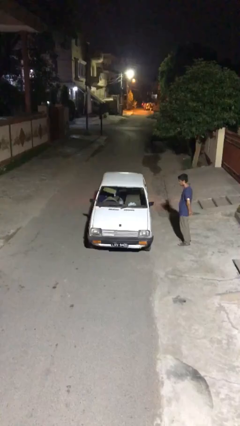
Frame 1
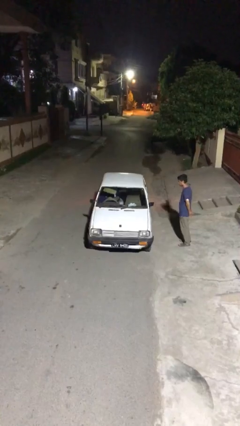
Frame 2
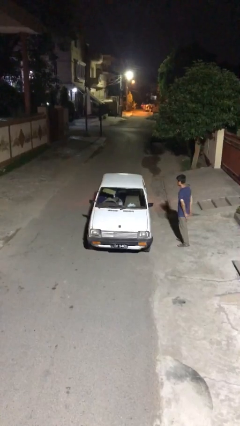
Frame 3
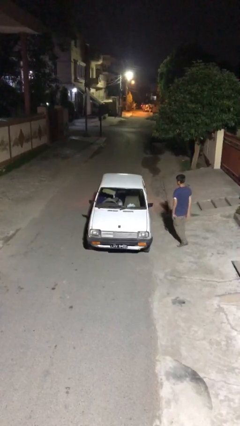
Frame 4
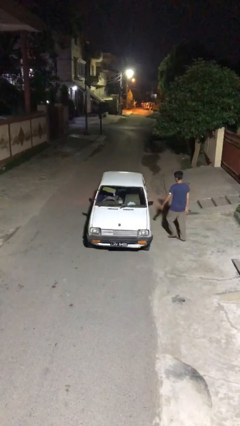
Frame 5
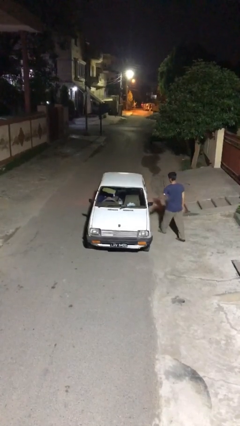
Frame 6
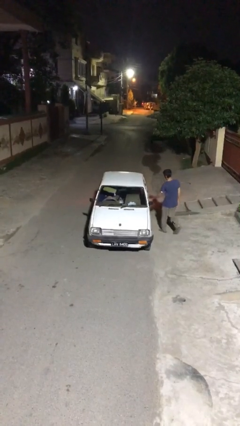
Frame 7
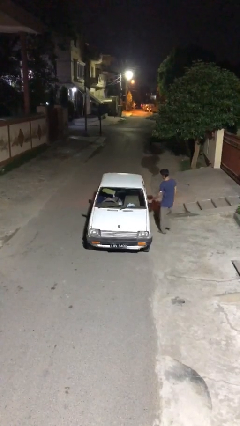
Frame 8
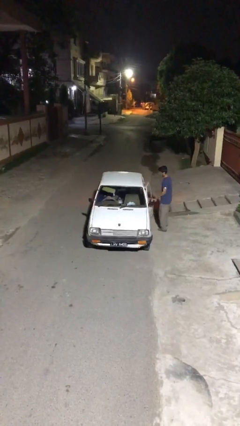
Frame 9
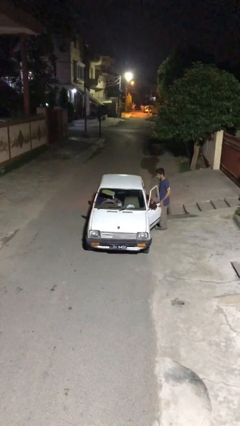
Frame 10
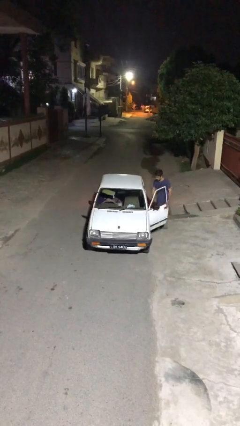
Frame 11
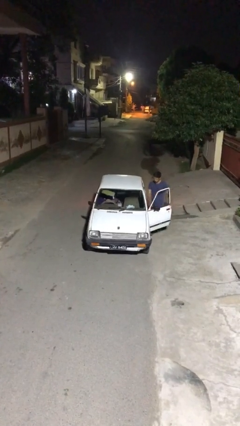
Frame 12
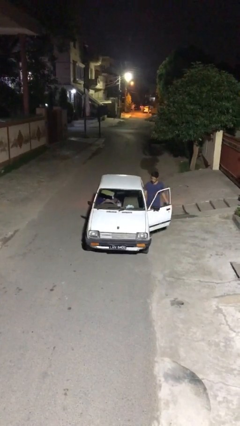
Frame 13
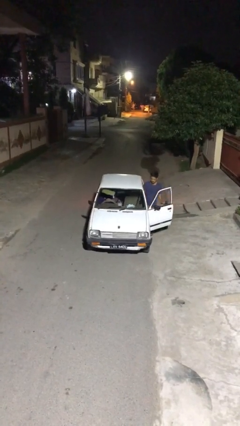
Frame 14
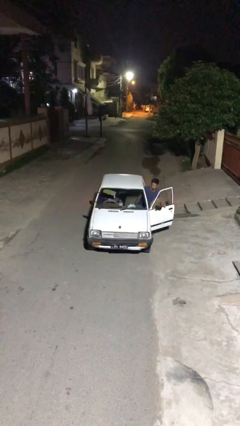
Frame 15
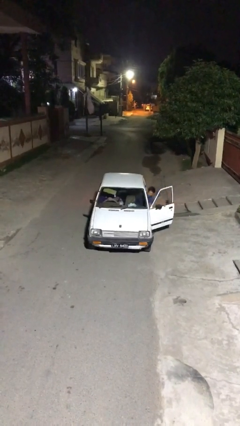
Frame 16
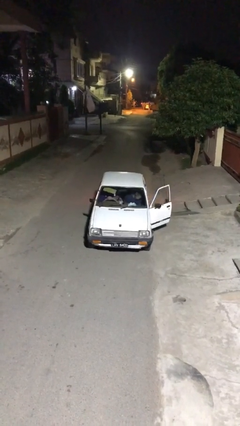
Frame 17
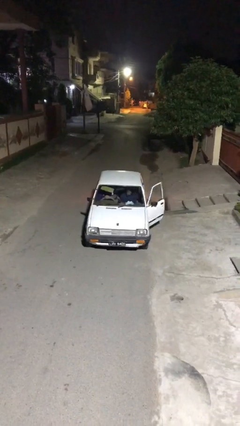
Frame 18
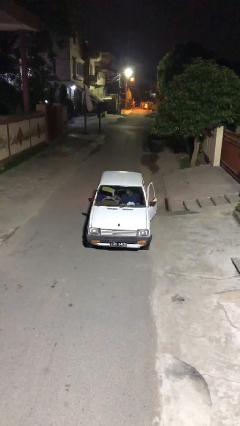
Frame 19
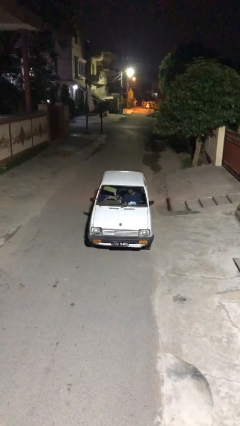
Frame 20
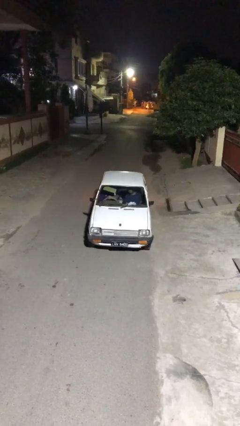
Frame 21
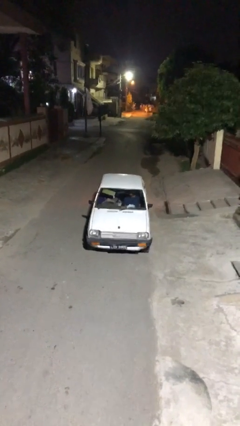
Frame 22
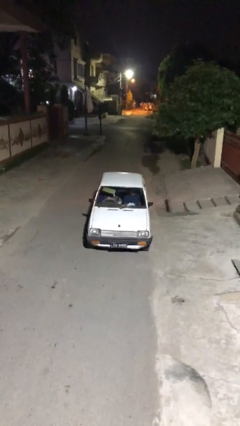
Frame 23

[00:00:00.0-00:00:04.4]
car picks up person

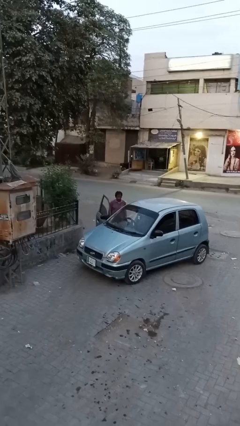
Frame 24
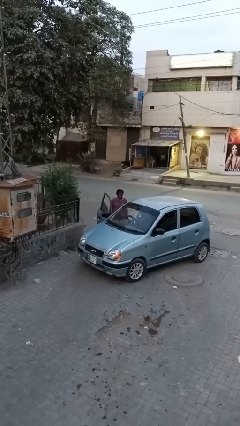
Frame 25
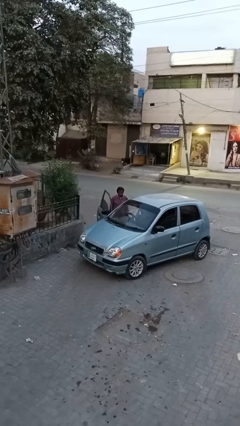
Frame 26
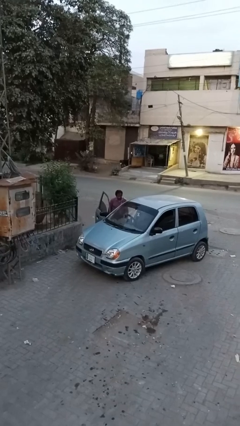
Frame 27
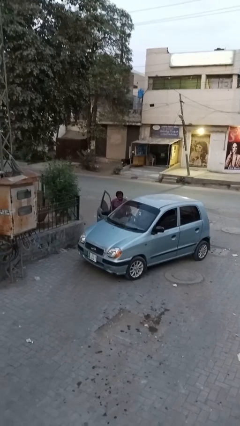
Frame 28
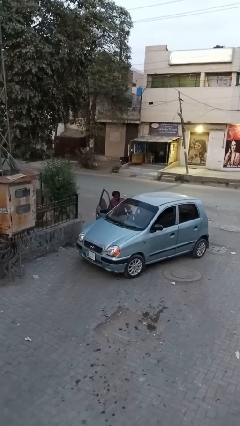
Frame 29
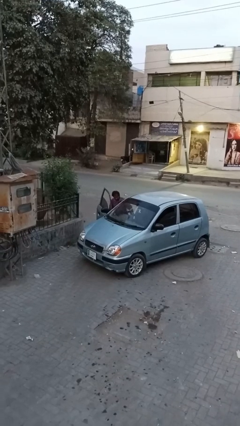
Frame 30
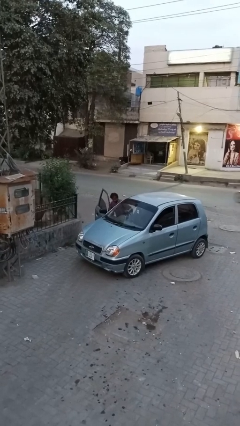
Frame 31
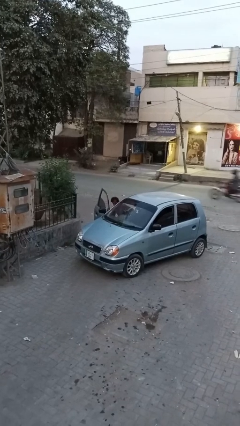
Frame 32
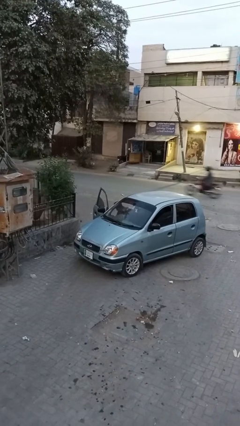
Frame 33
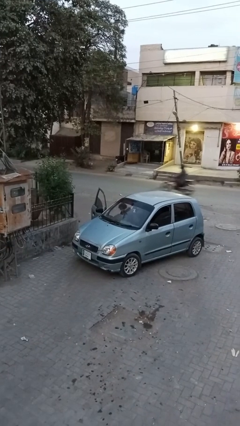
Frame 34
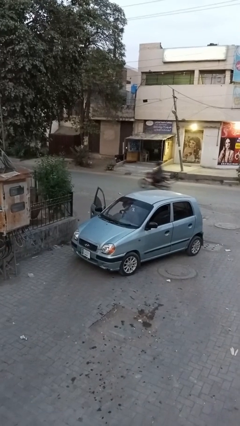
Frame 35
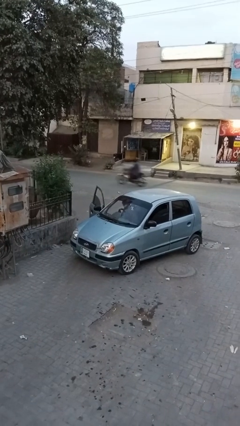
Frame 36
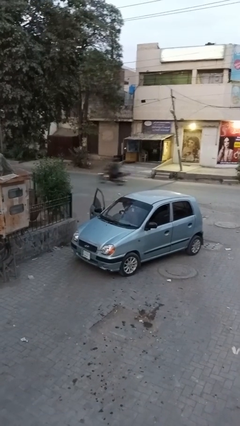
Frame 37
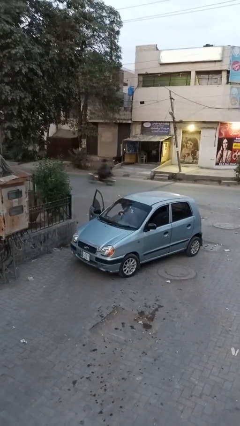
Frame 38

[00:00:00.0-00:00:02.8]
person enters car

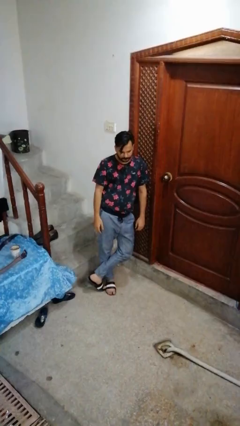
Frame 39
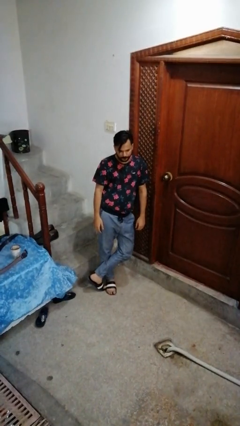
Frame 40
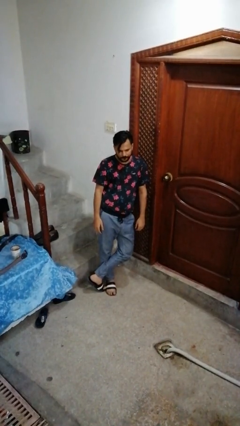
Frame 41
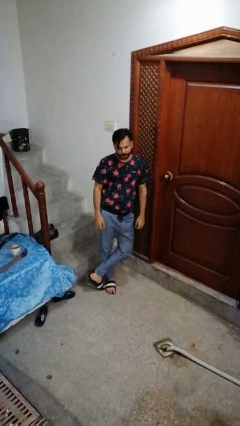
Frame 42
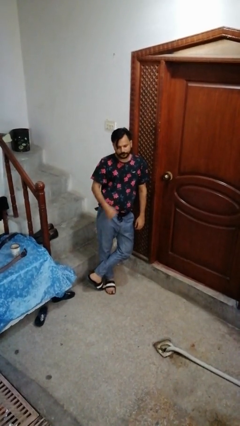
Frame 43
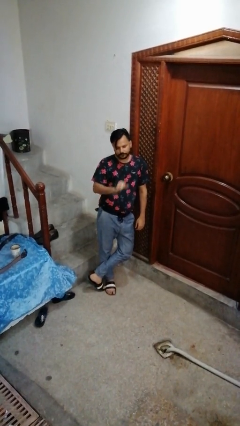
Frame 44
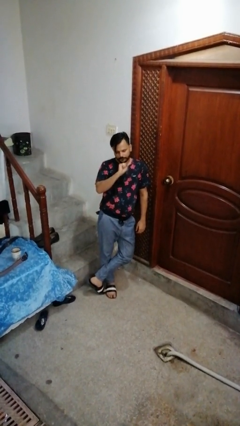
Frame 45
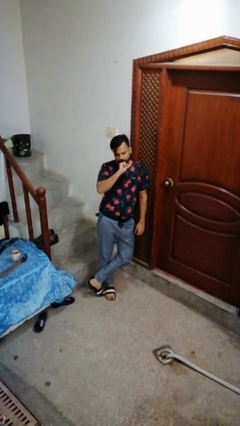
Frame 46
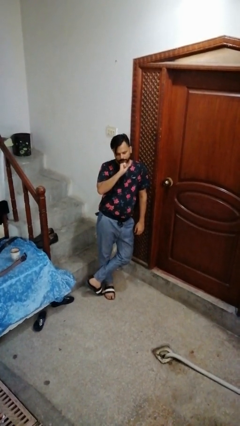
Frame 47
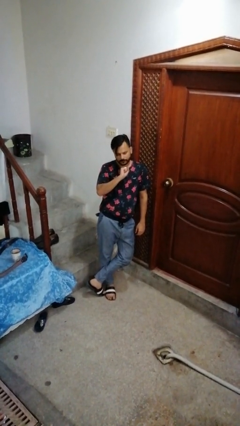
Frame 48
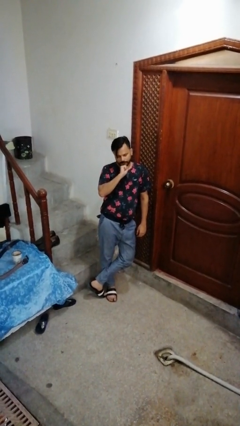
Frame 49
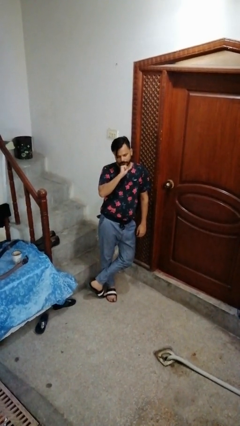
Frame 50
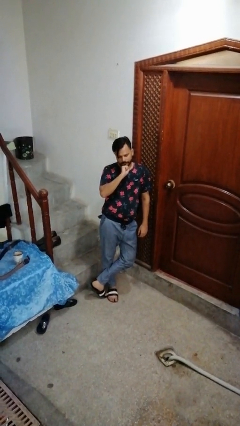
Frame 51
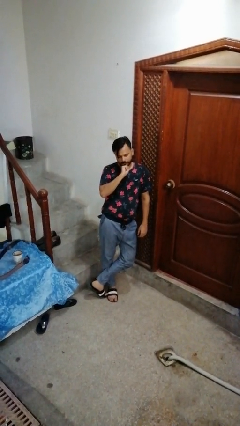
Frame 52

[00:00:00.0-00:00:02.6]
person strokes chin

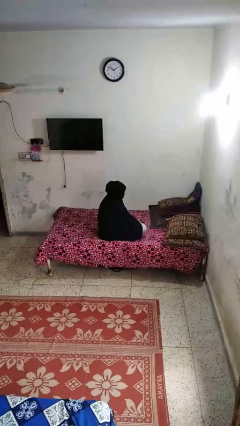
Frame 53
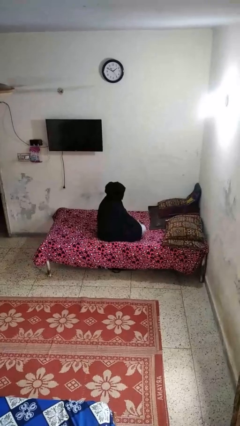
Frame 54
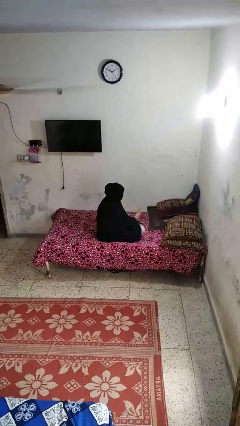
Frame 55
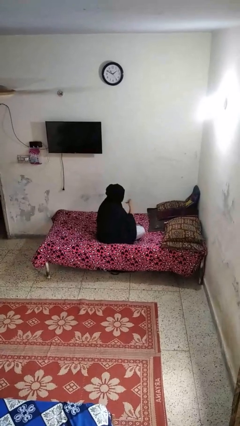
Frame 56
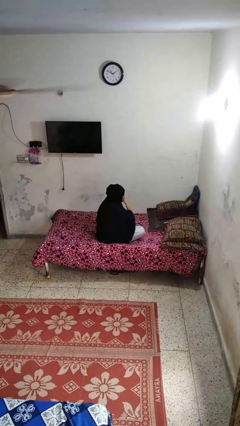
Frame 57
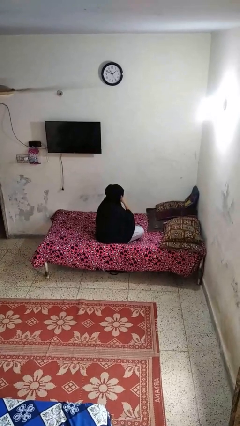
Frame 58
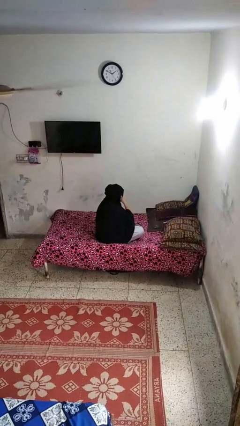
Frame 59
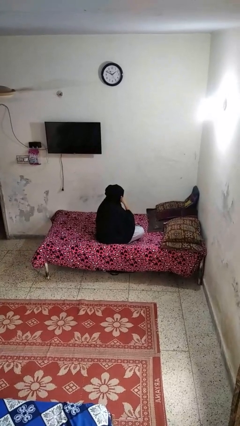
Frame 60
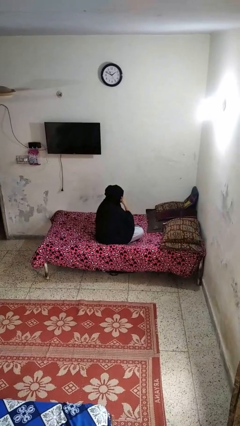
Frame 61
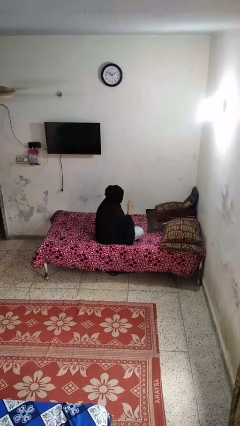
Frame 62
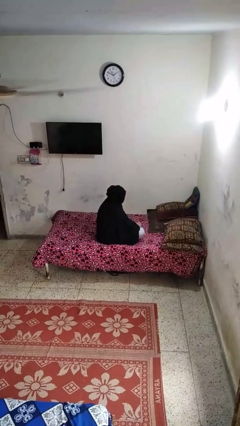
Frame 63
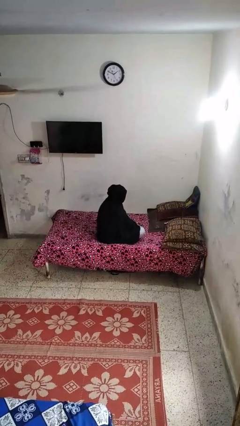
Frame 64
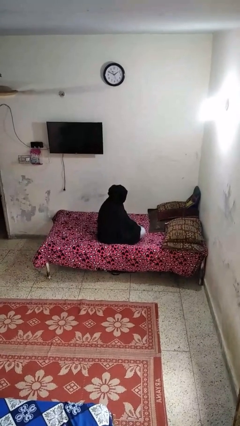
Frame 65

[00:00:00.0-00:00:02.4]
person gestures call me

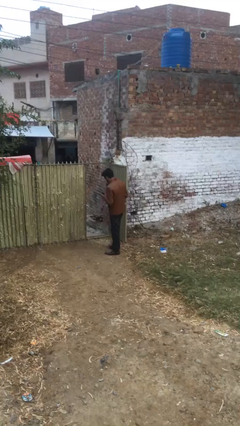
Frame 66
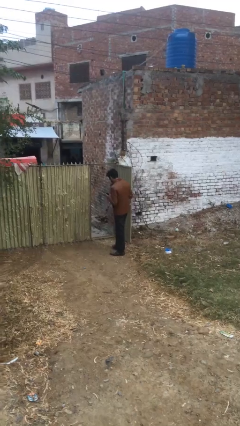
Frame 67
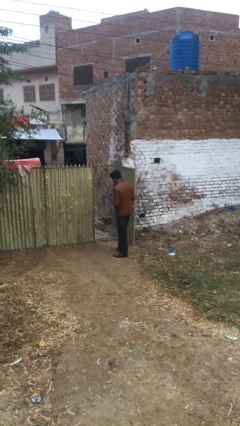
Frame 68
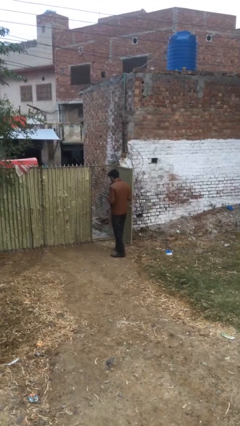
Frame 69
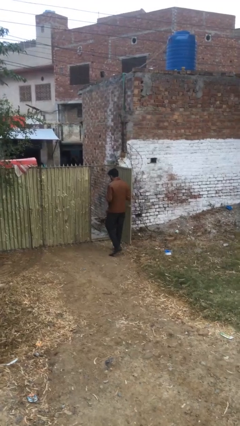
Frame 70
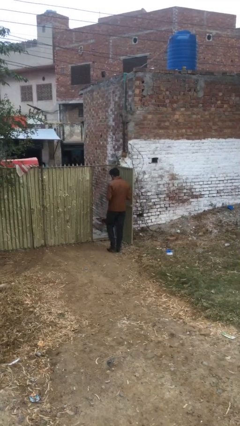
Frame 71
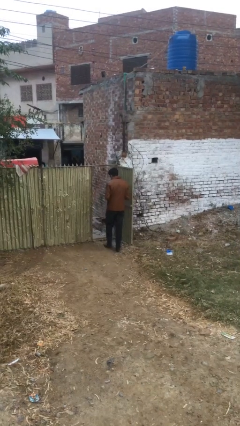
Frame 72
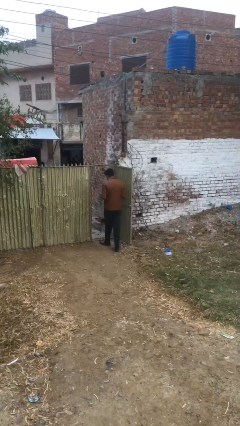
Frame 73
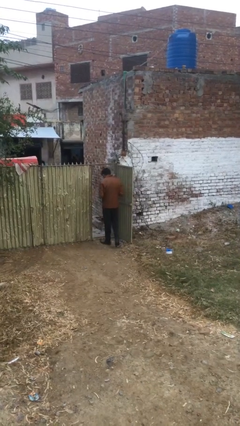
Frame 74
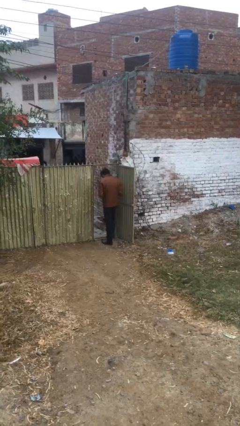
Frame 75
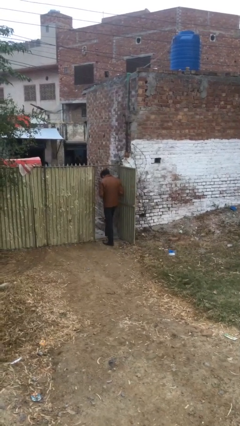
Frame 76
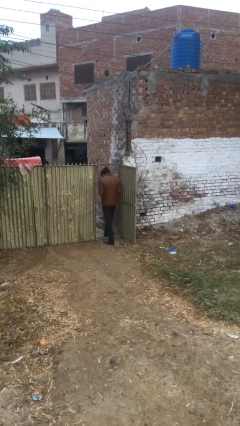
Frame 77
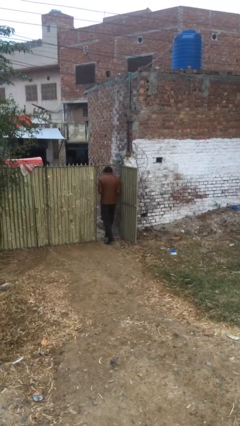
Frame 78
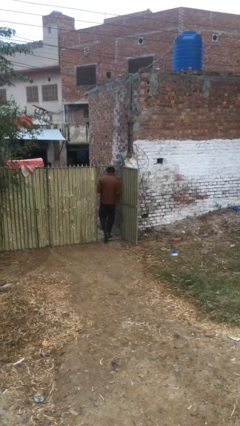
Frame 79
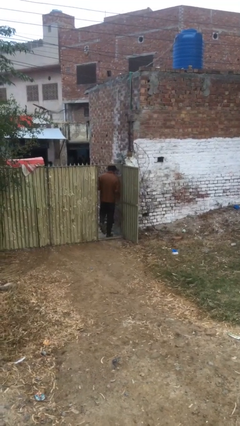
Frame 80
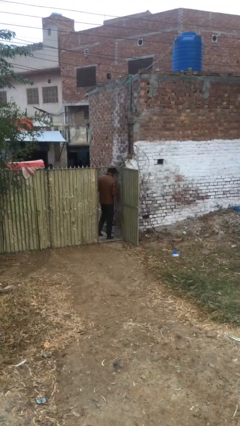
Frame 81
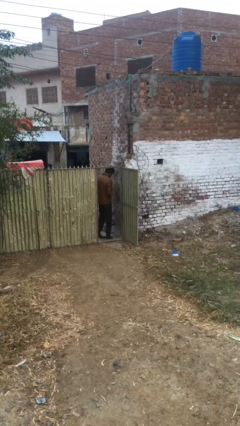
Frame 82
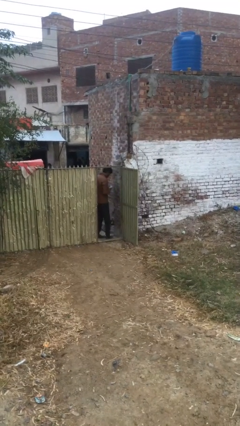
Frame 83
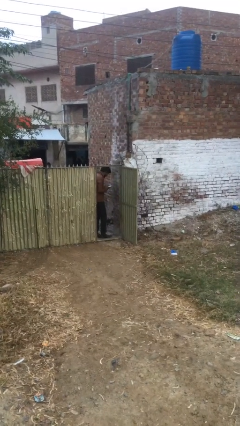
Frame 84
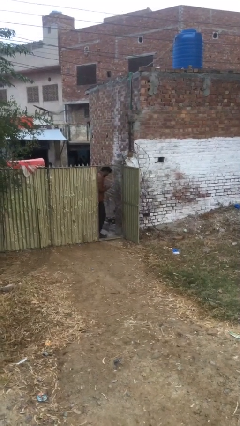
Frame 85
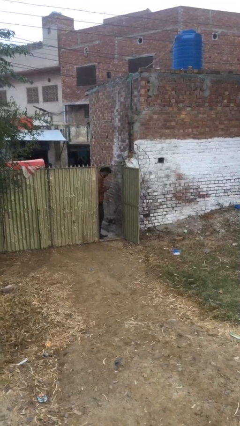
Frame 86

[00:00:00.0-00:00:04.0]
person enters scene through structure

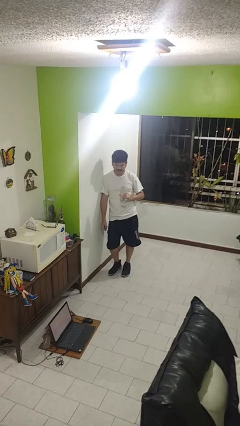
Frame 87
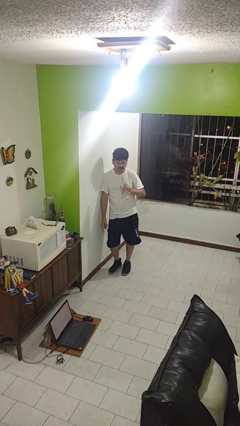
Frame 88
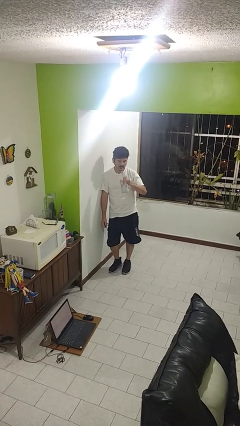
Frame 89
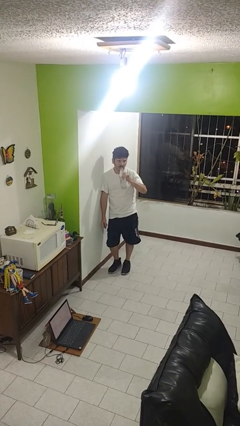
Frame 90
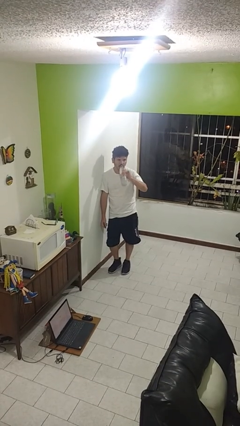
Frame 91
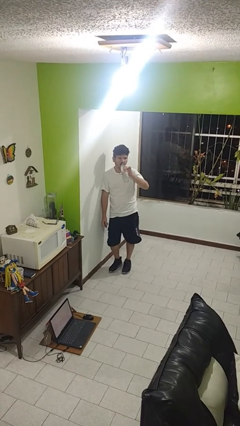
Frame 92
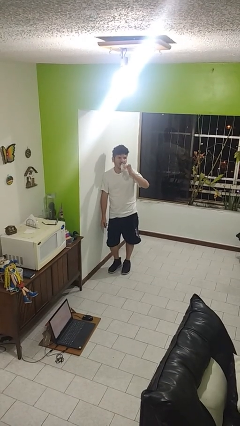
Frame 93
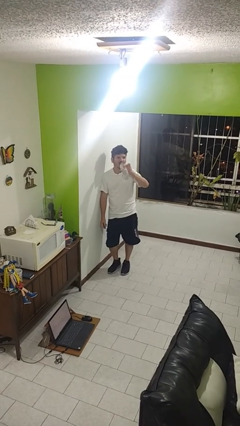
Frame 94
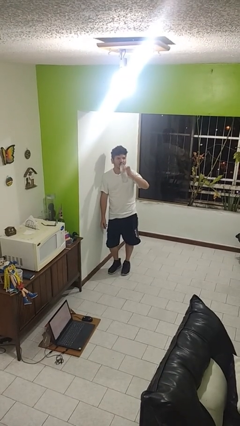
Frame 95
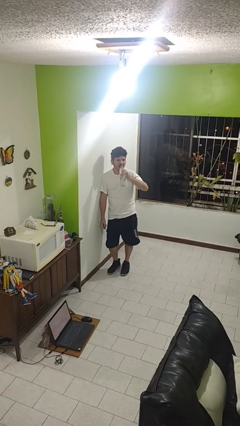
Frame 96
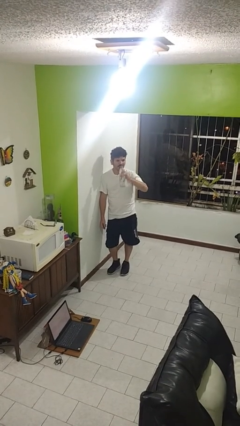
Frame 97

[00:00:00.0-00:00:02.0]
person drinks from bottle
